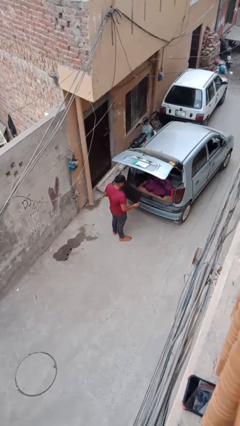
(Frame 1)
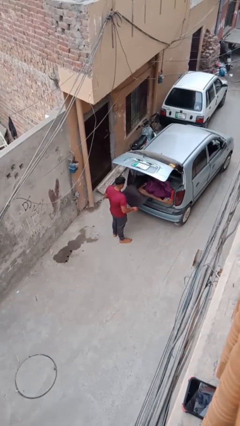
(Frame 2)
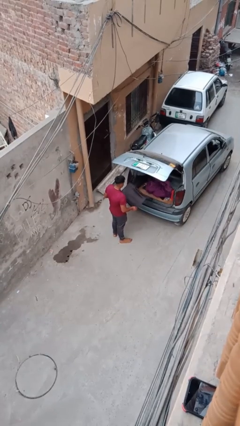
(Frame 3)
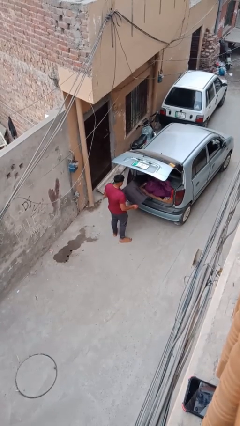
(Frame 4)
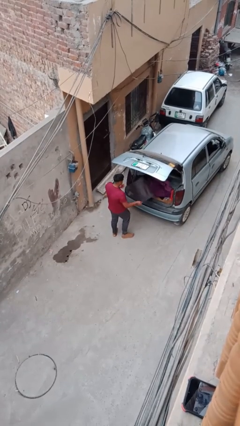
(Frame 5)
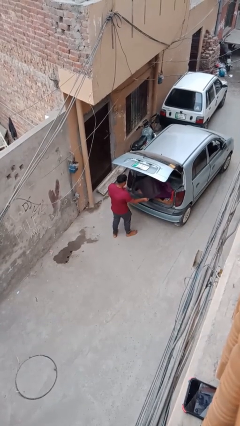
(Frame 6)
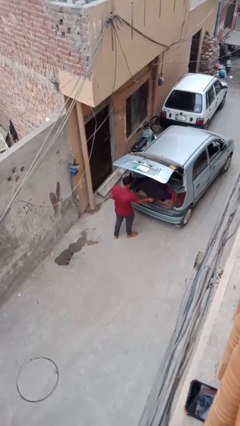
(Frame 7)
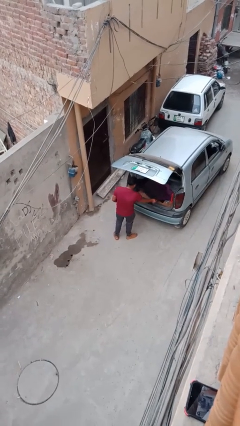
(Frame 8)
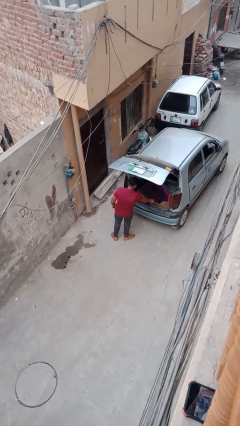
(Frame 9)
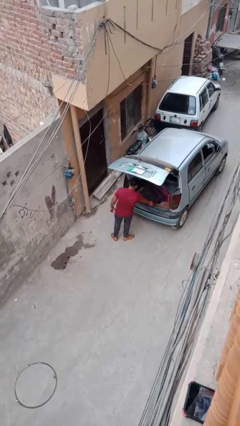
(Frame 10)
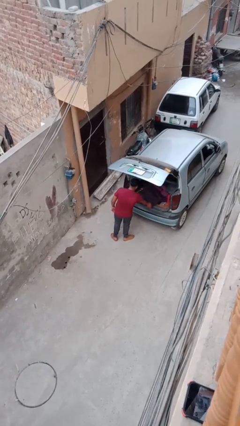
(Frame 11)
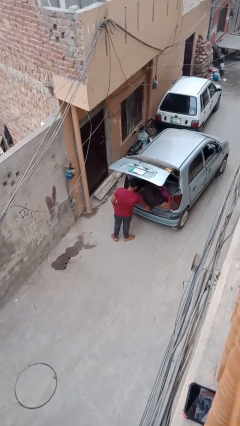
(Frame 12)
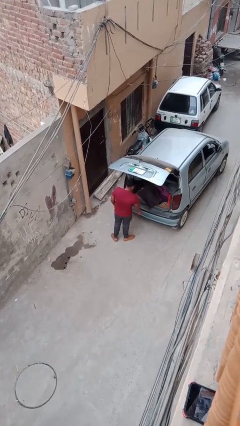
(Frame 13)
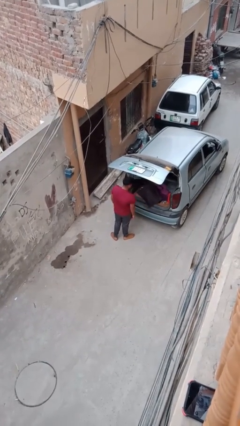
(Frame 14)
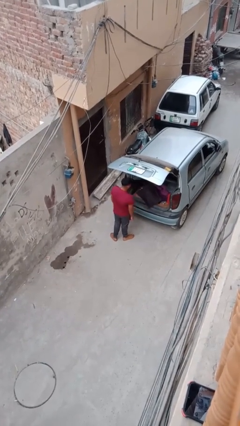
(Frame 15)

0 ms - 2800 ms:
person loads car

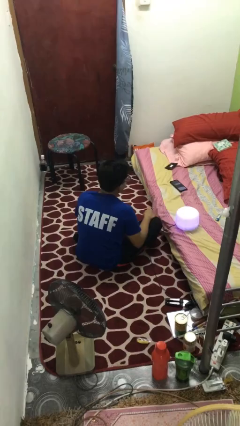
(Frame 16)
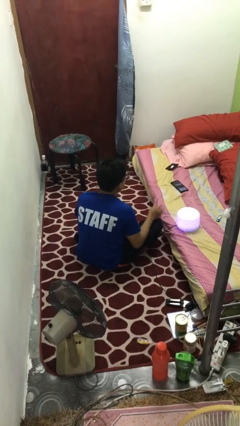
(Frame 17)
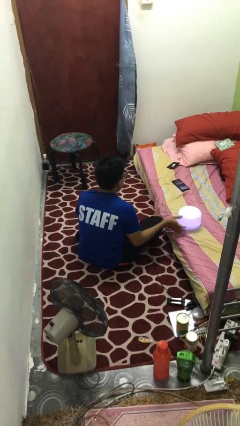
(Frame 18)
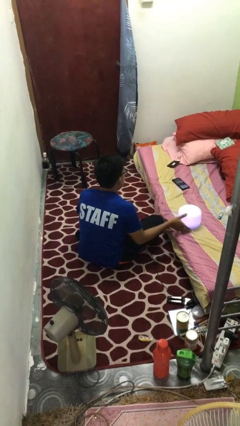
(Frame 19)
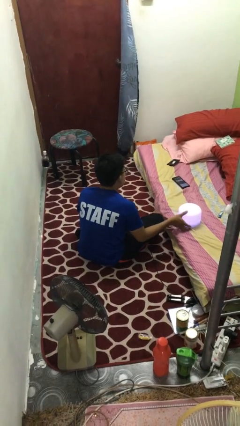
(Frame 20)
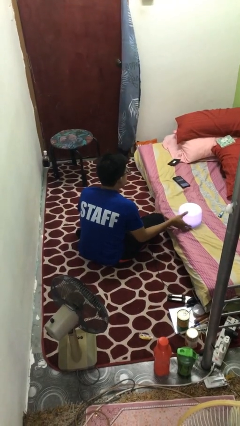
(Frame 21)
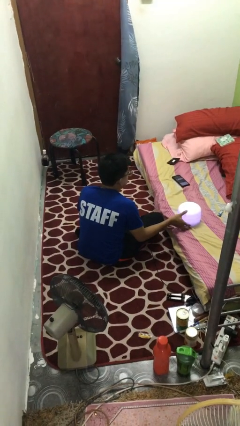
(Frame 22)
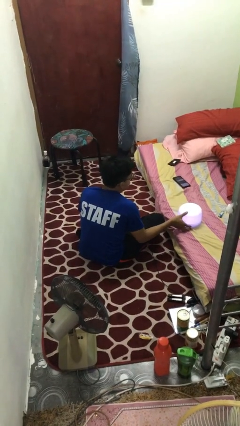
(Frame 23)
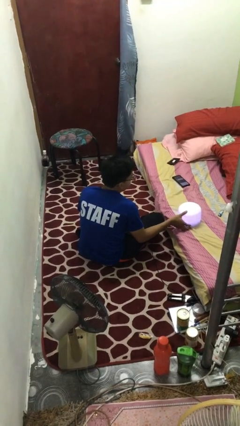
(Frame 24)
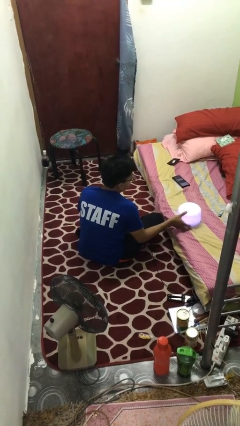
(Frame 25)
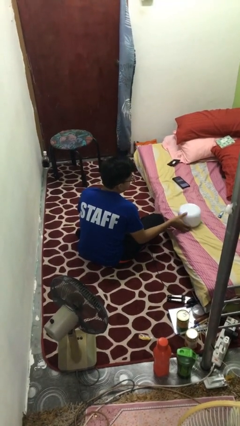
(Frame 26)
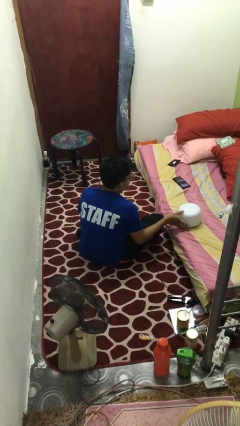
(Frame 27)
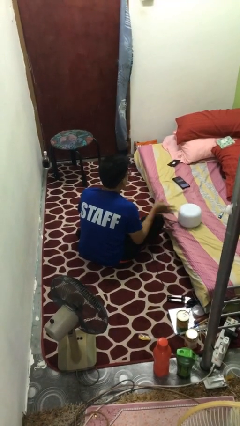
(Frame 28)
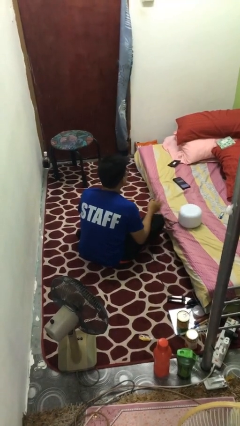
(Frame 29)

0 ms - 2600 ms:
person turns off lamp

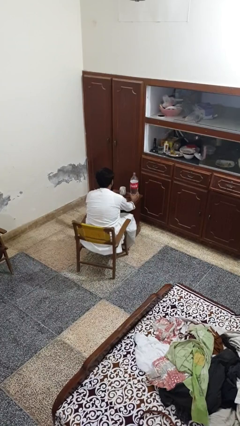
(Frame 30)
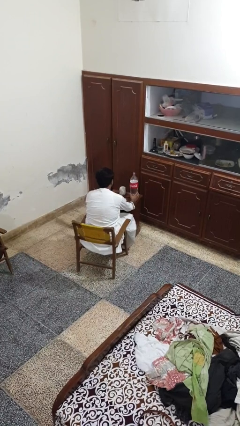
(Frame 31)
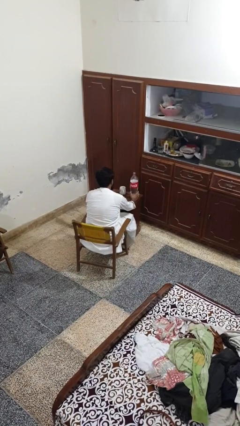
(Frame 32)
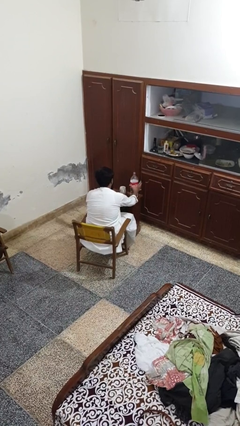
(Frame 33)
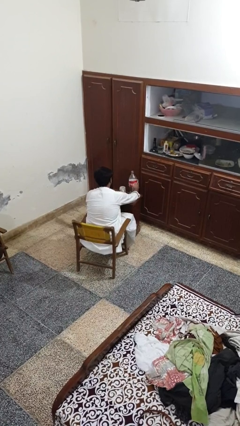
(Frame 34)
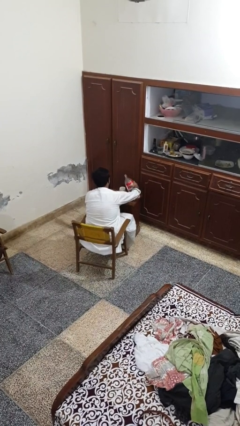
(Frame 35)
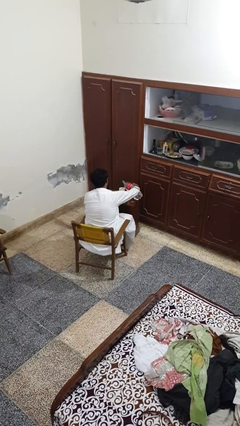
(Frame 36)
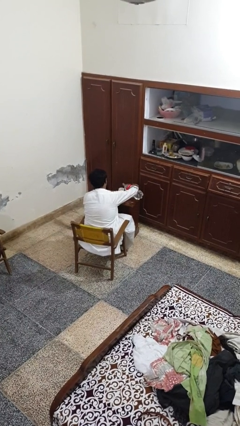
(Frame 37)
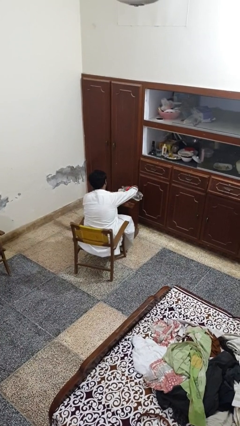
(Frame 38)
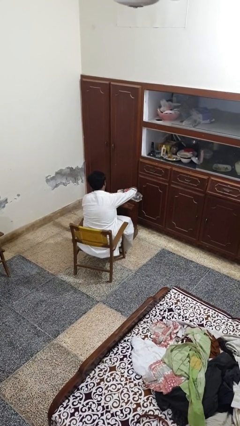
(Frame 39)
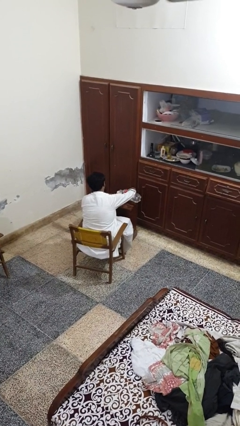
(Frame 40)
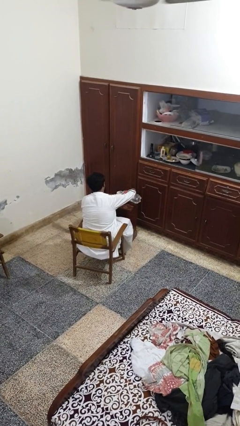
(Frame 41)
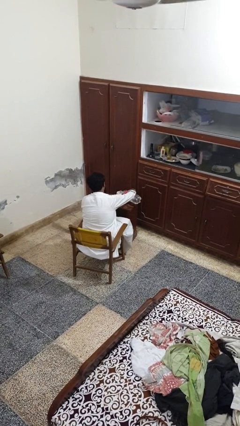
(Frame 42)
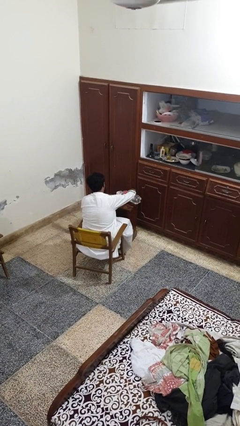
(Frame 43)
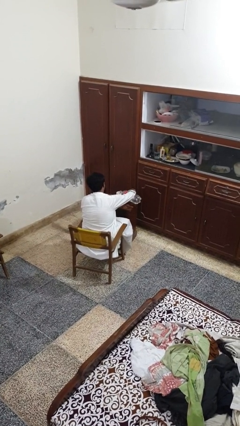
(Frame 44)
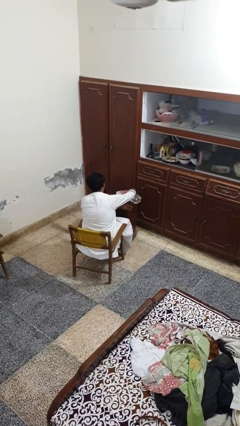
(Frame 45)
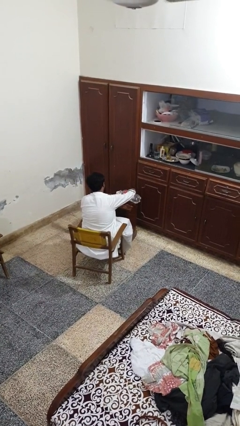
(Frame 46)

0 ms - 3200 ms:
person pours liquid into cup

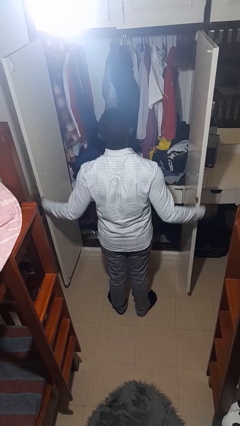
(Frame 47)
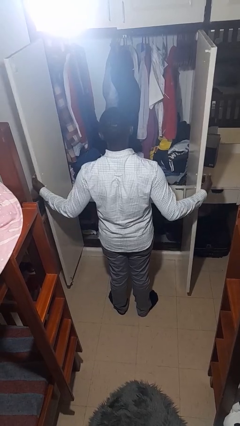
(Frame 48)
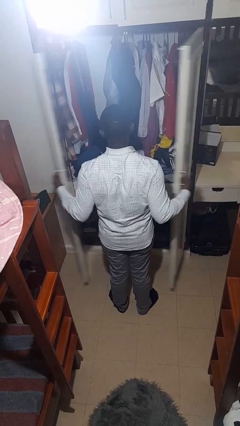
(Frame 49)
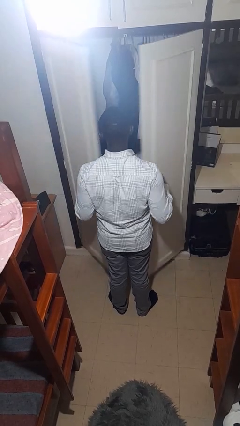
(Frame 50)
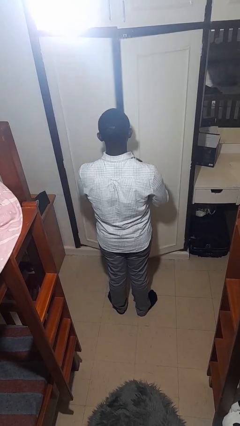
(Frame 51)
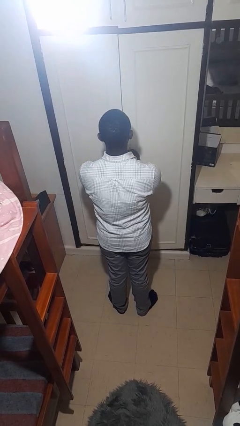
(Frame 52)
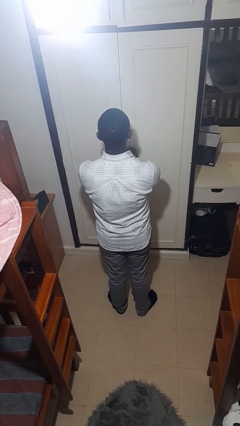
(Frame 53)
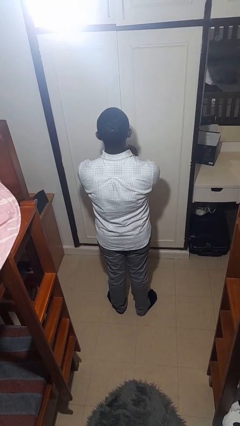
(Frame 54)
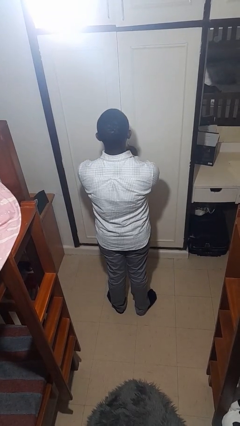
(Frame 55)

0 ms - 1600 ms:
person closes closet door

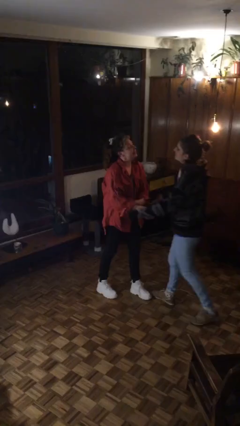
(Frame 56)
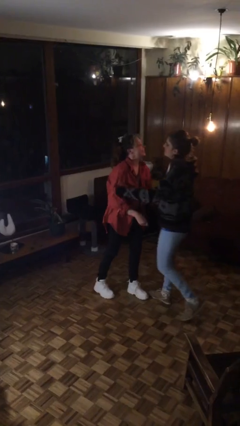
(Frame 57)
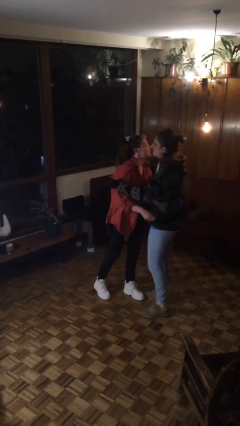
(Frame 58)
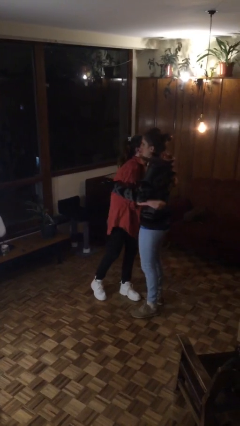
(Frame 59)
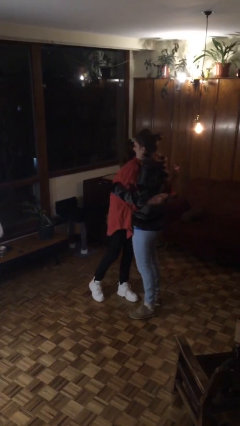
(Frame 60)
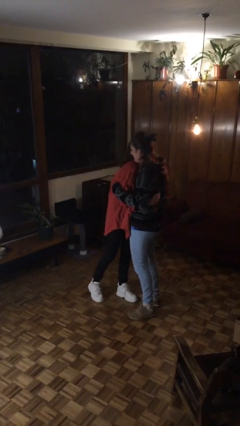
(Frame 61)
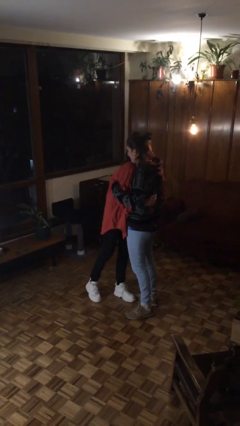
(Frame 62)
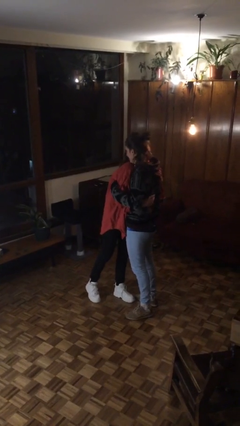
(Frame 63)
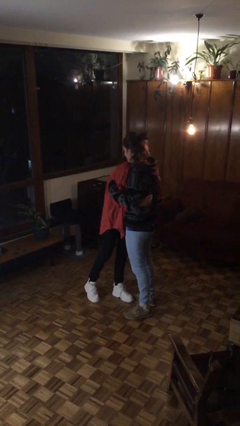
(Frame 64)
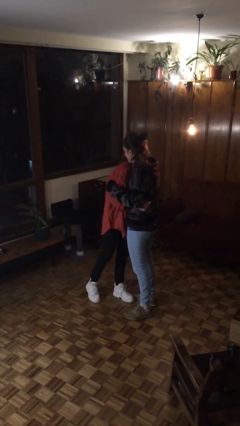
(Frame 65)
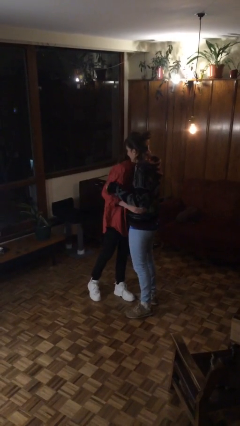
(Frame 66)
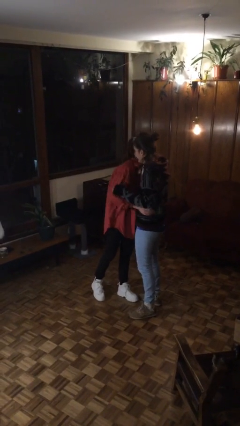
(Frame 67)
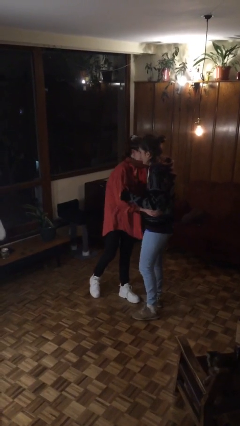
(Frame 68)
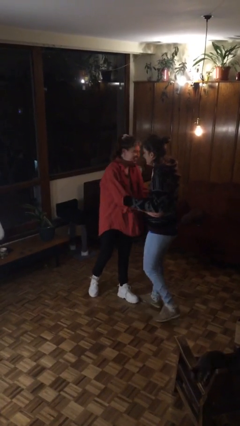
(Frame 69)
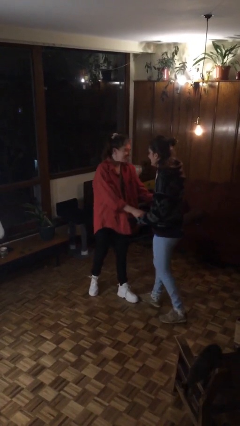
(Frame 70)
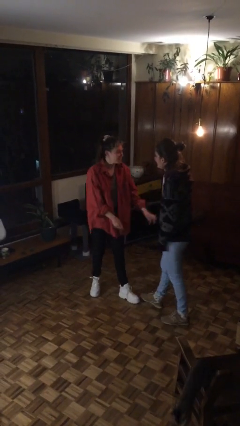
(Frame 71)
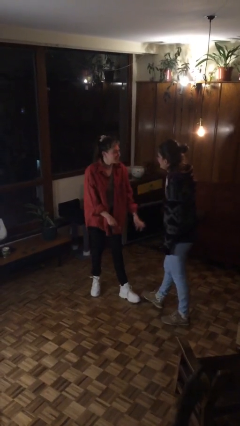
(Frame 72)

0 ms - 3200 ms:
person embraces person

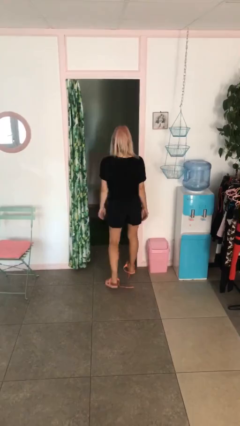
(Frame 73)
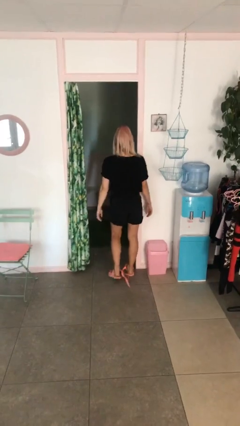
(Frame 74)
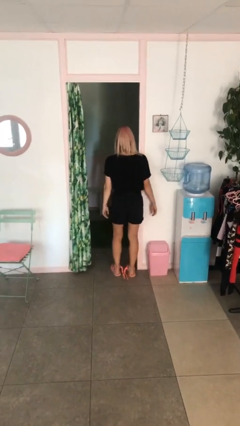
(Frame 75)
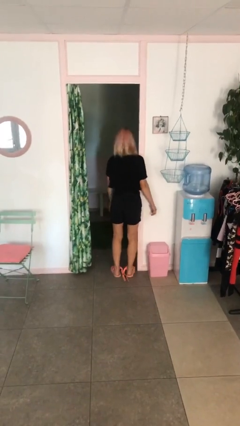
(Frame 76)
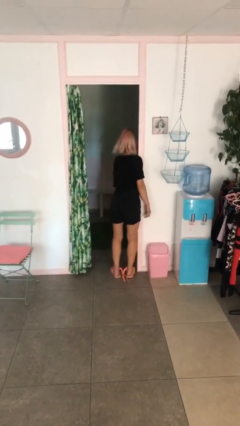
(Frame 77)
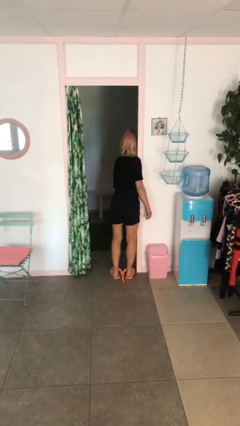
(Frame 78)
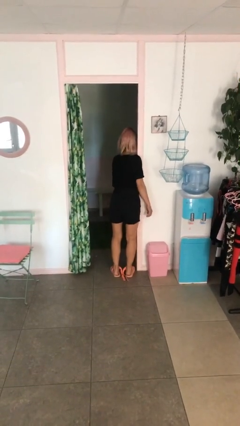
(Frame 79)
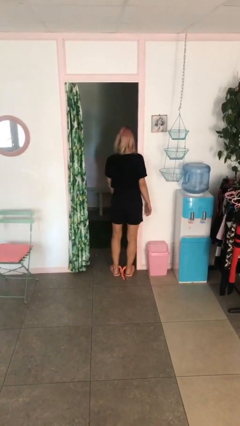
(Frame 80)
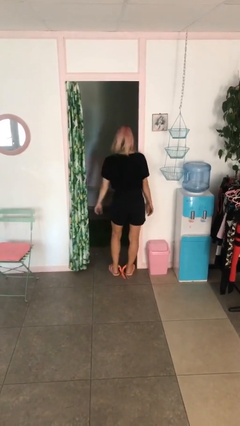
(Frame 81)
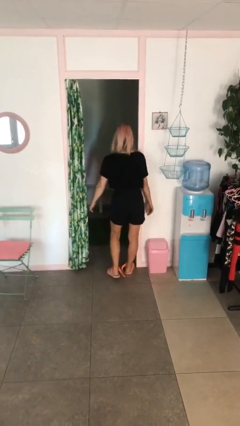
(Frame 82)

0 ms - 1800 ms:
person bumps into wall

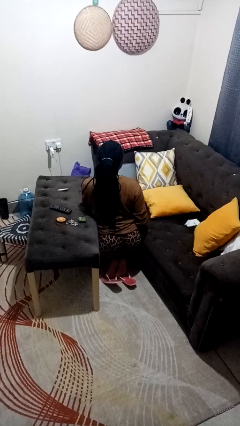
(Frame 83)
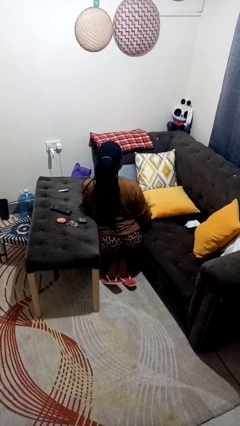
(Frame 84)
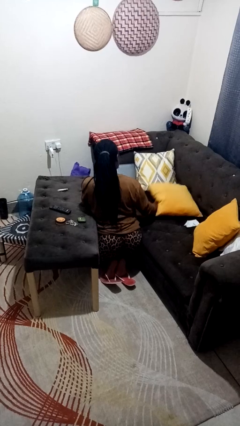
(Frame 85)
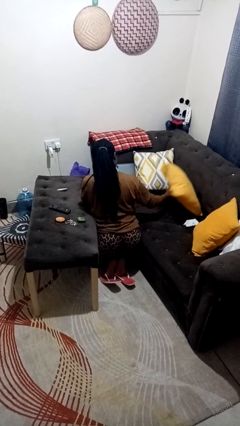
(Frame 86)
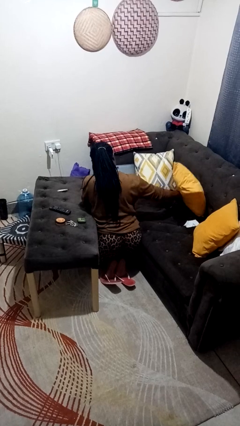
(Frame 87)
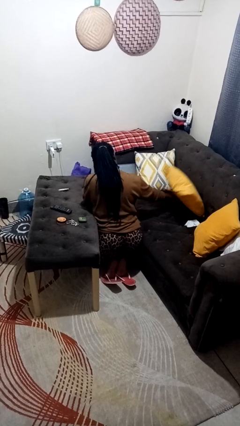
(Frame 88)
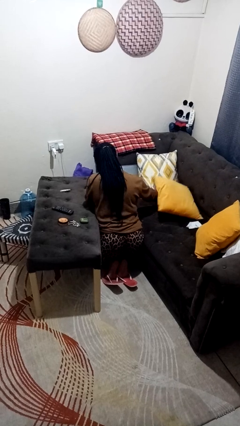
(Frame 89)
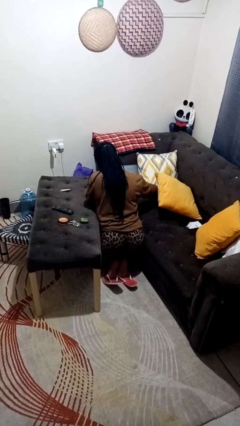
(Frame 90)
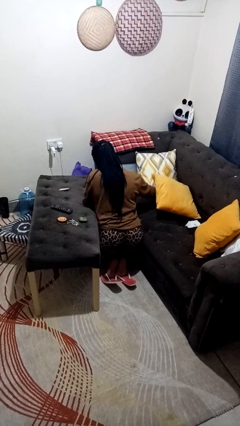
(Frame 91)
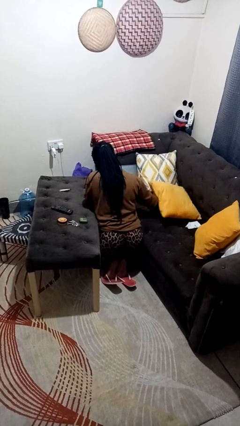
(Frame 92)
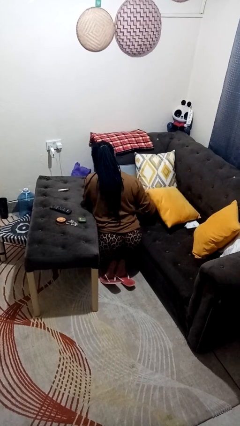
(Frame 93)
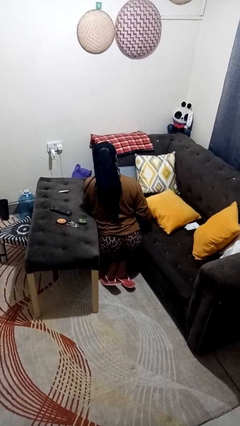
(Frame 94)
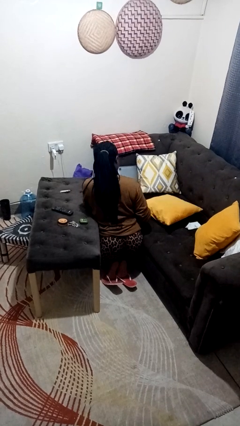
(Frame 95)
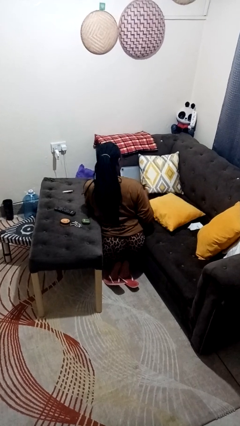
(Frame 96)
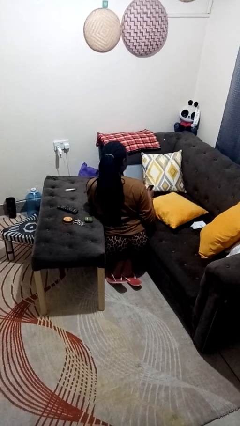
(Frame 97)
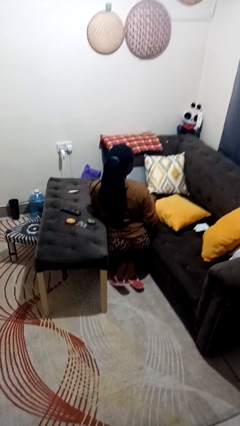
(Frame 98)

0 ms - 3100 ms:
person searches in couch
